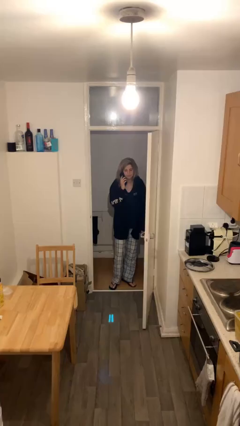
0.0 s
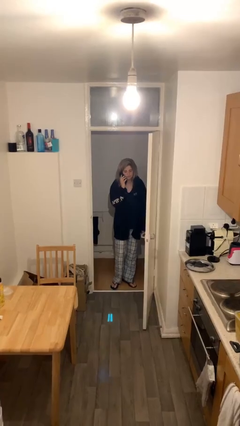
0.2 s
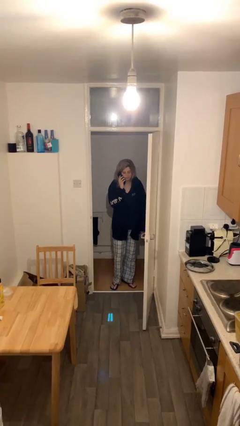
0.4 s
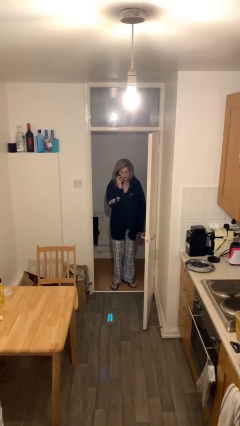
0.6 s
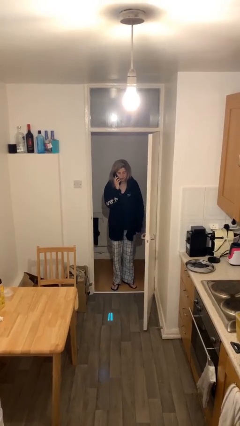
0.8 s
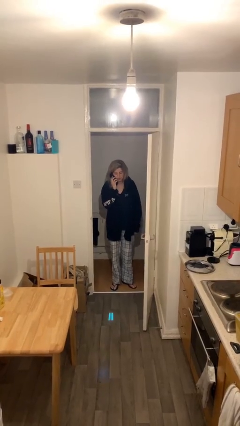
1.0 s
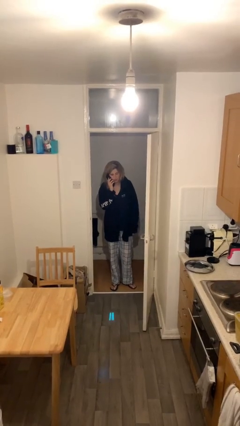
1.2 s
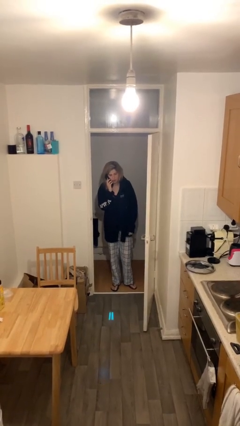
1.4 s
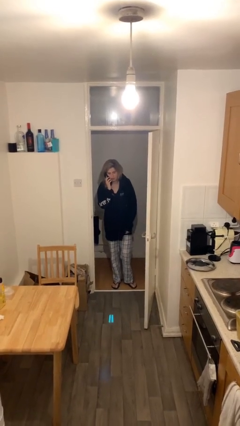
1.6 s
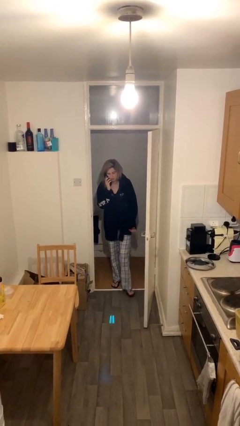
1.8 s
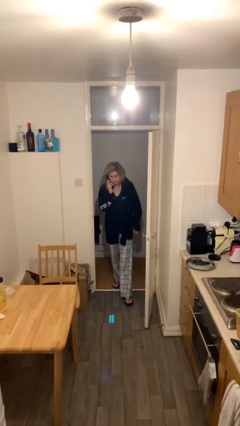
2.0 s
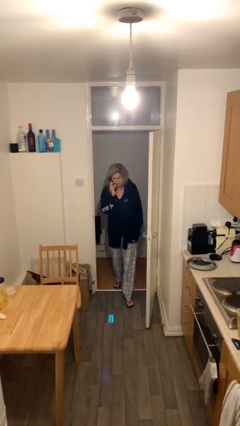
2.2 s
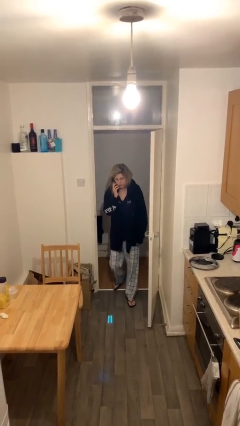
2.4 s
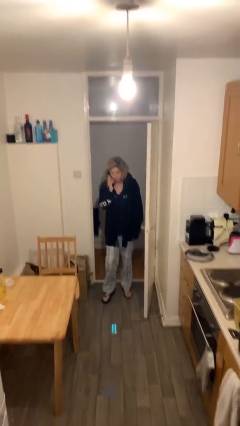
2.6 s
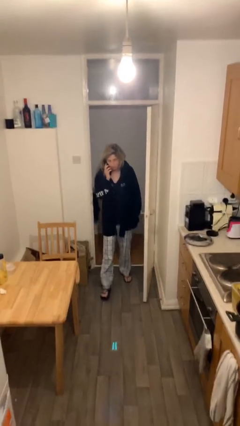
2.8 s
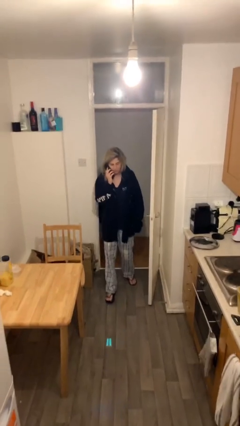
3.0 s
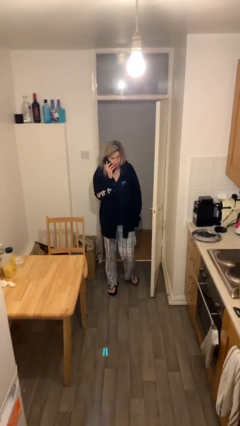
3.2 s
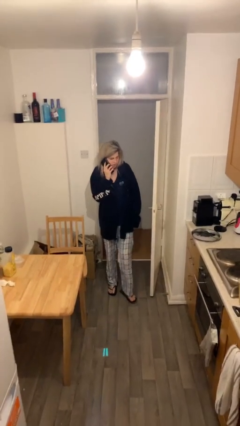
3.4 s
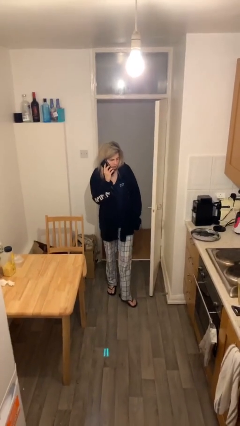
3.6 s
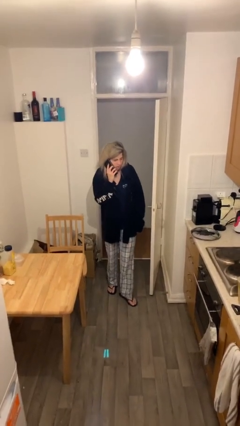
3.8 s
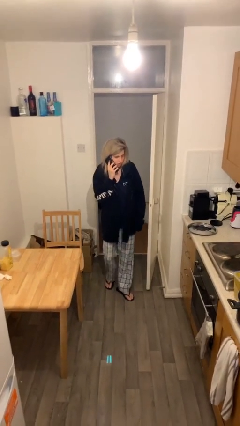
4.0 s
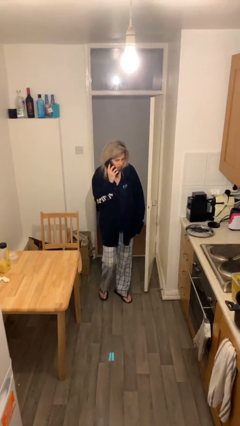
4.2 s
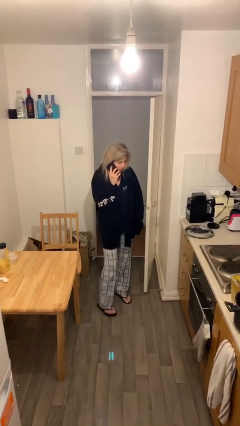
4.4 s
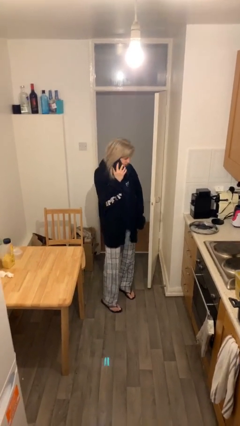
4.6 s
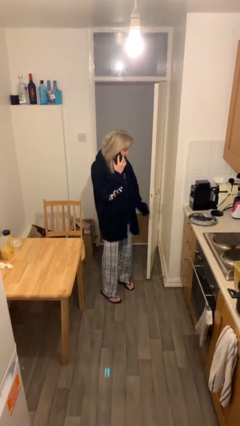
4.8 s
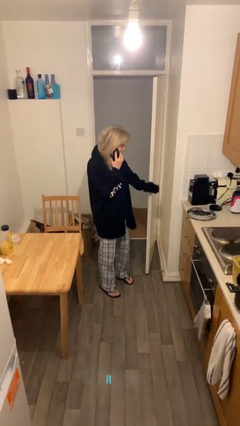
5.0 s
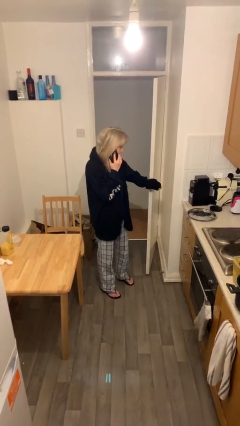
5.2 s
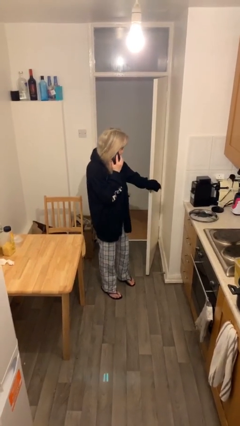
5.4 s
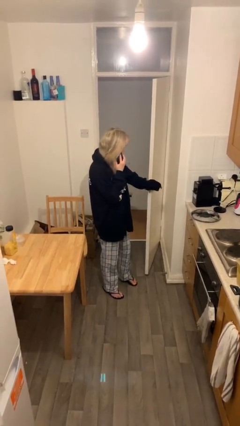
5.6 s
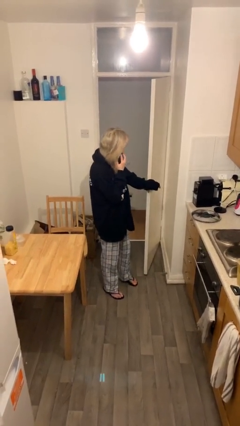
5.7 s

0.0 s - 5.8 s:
person enters scene through structure

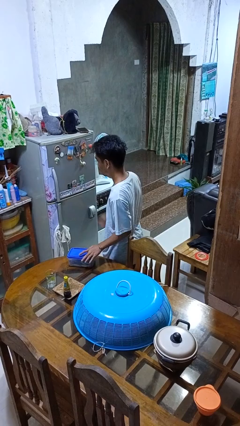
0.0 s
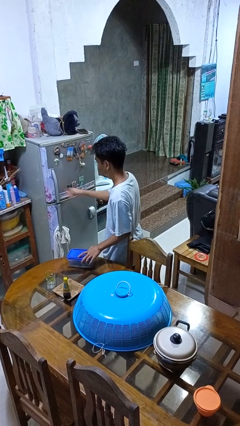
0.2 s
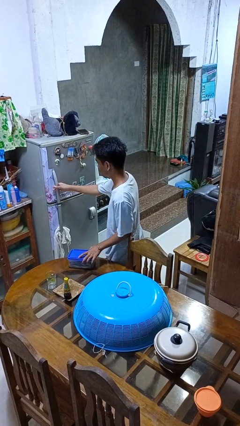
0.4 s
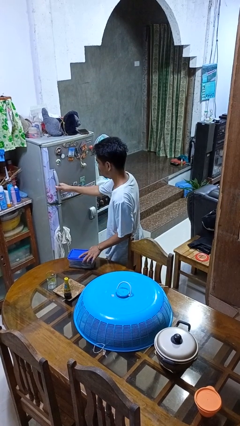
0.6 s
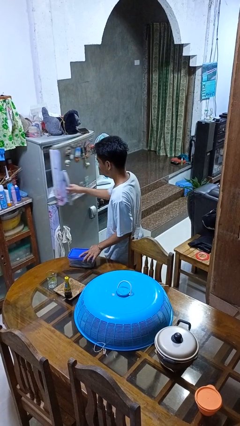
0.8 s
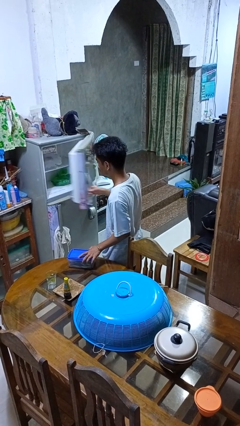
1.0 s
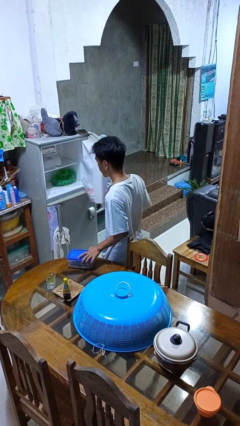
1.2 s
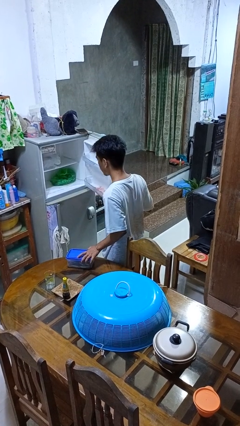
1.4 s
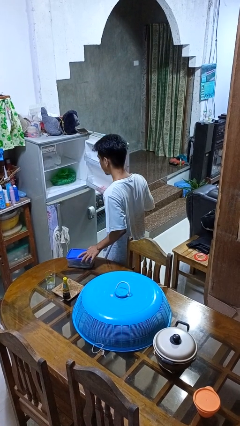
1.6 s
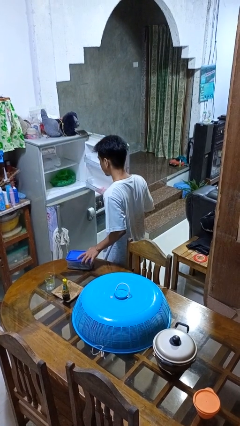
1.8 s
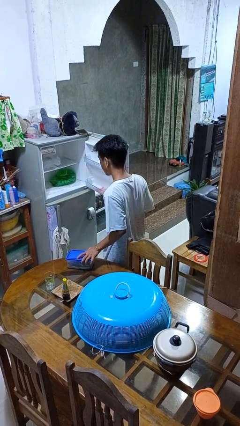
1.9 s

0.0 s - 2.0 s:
person opens refrigerator

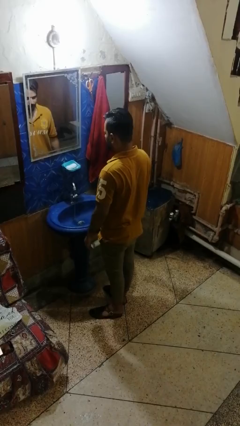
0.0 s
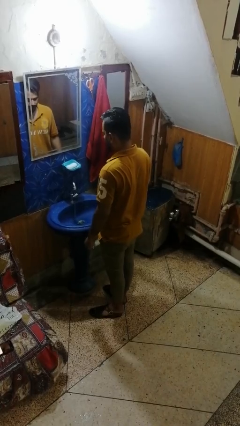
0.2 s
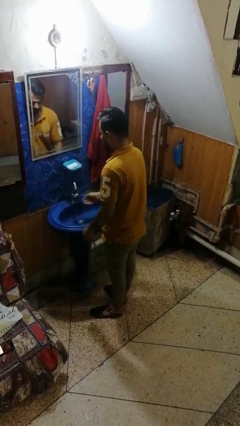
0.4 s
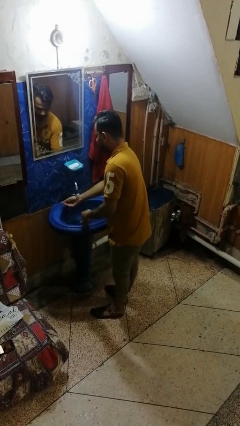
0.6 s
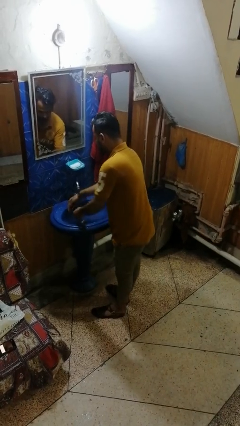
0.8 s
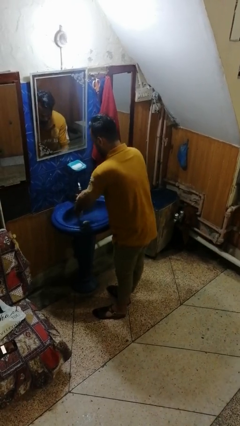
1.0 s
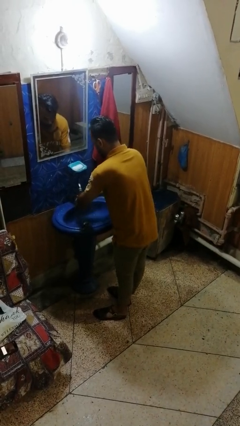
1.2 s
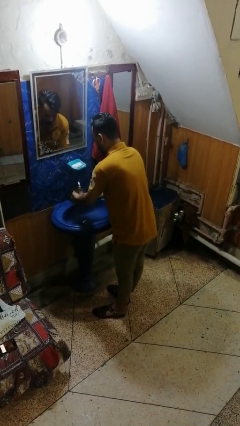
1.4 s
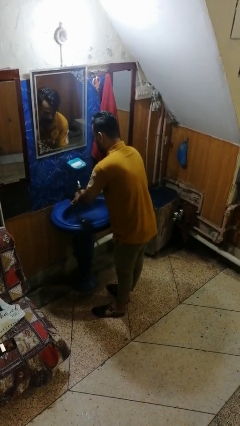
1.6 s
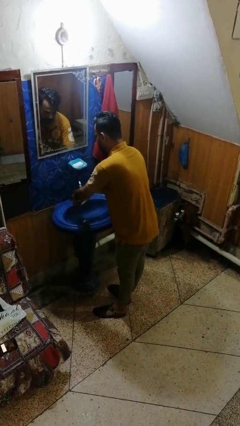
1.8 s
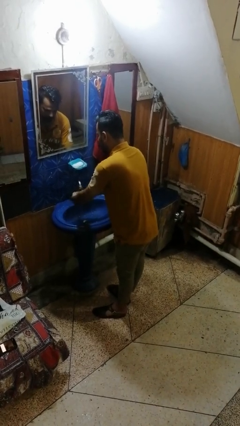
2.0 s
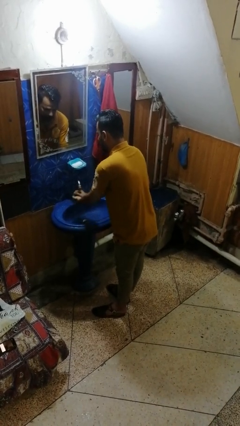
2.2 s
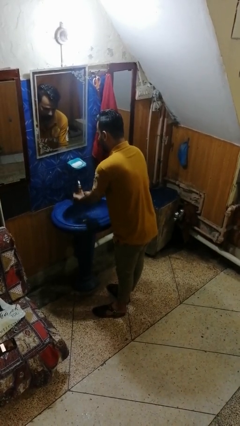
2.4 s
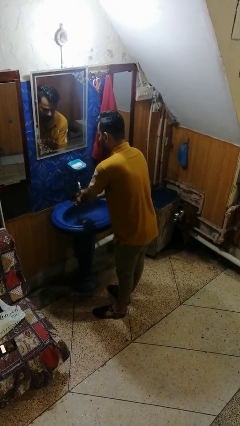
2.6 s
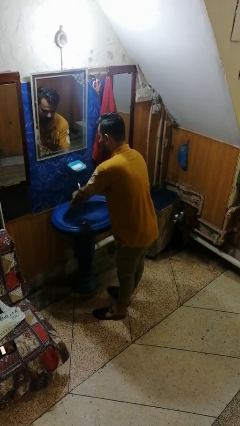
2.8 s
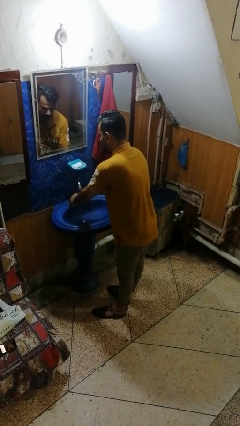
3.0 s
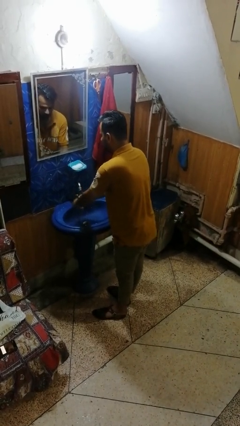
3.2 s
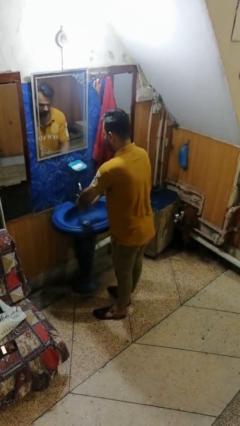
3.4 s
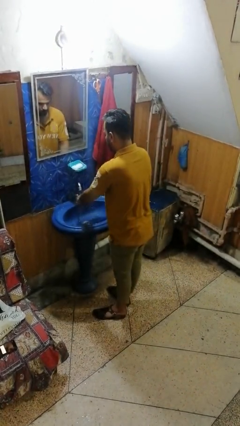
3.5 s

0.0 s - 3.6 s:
person washes hands

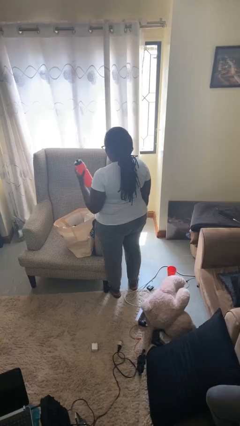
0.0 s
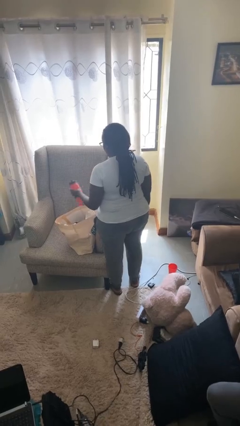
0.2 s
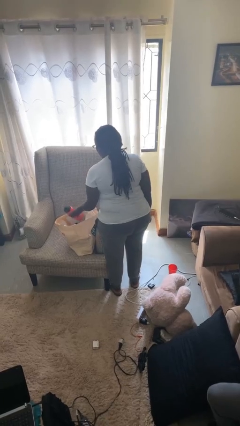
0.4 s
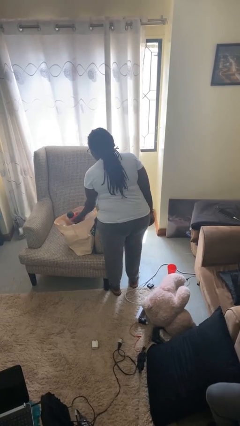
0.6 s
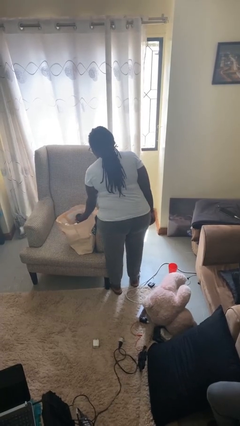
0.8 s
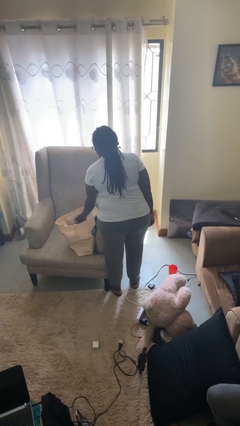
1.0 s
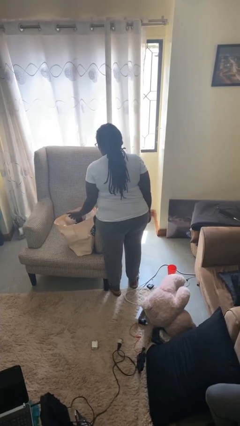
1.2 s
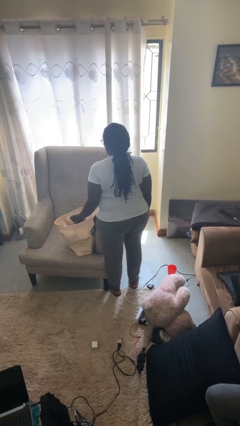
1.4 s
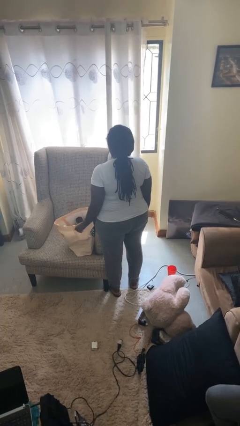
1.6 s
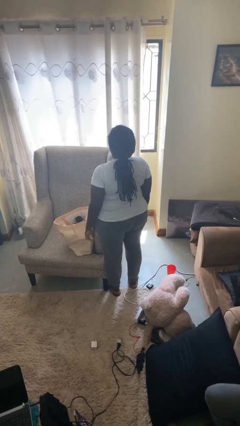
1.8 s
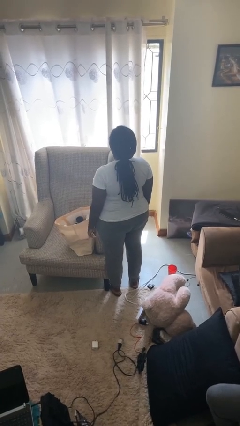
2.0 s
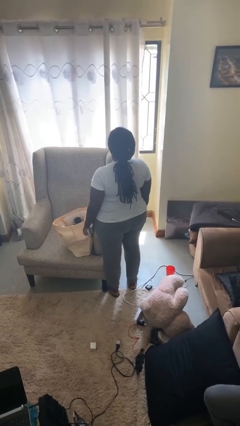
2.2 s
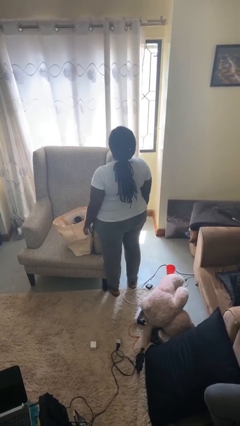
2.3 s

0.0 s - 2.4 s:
person puts object into bag

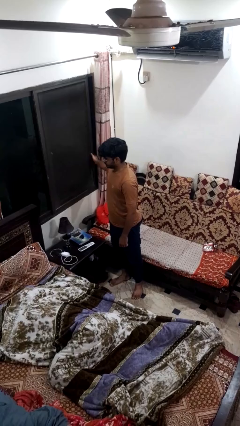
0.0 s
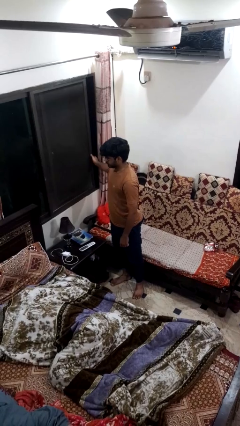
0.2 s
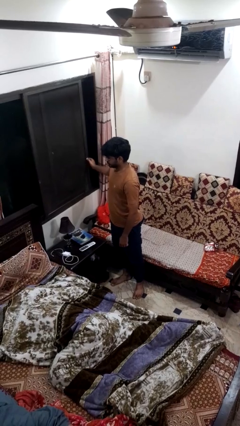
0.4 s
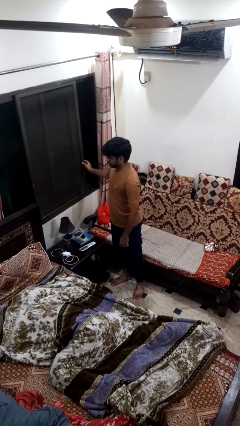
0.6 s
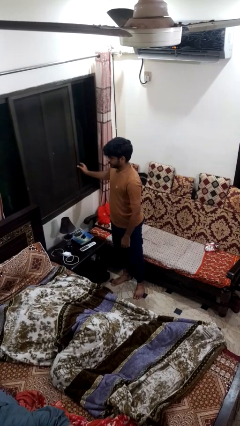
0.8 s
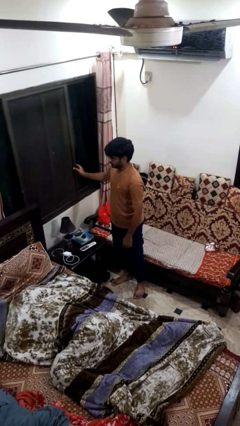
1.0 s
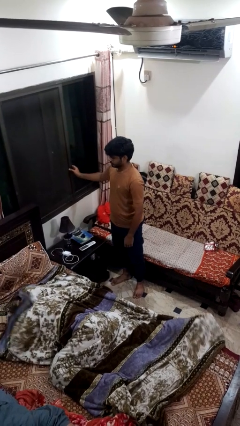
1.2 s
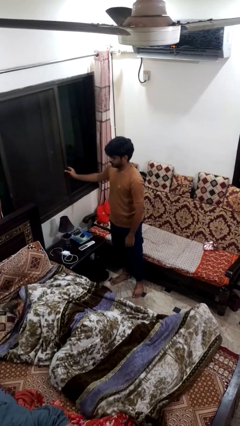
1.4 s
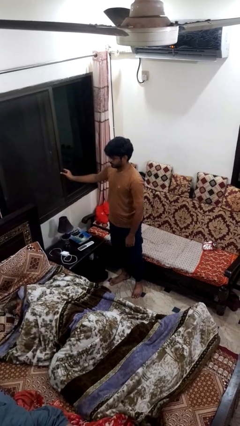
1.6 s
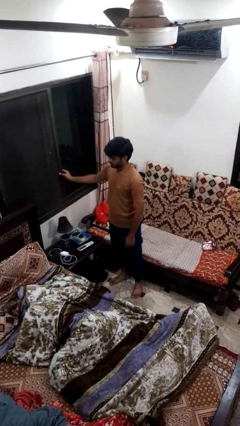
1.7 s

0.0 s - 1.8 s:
person closes home window

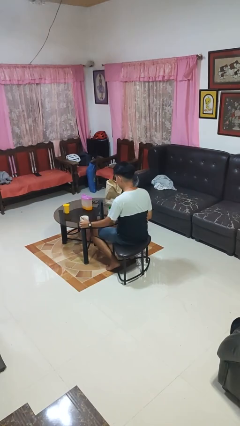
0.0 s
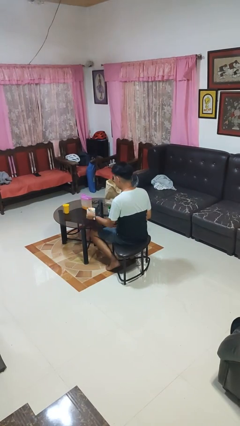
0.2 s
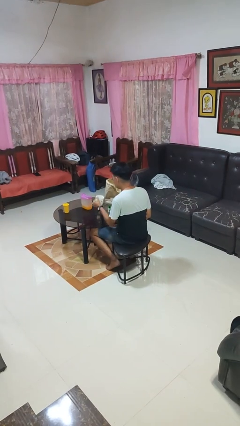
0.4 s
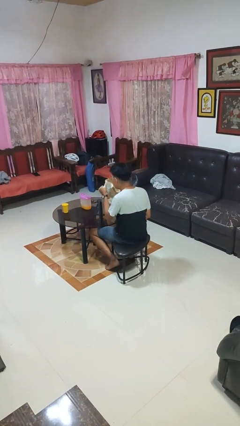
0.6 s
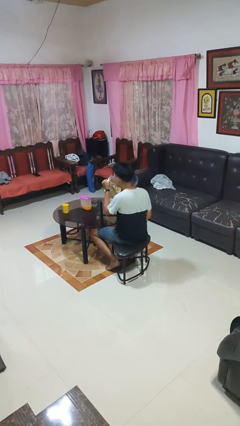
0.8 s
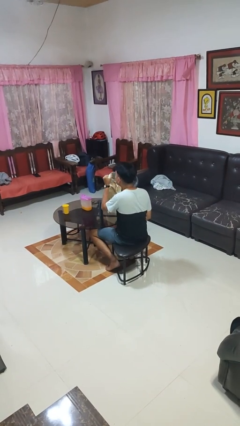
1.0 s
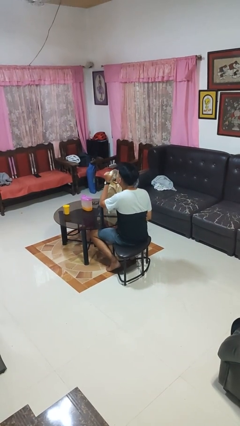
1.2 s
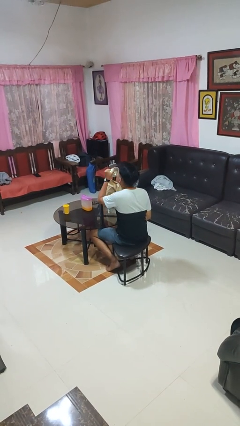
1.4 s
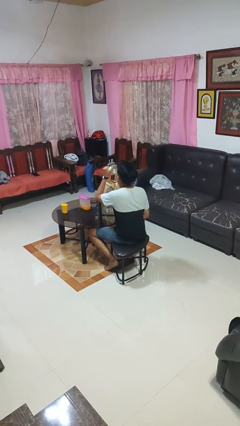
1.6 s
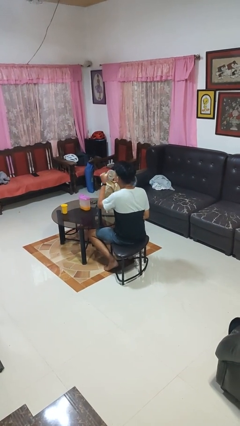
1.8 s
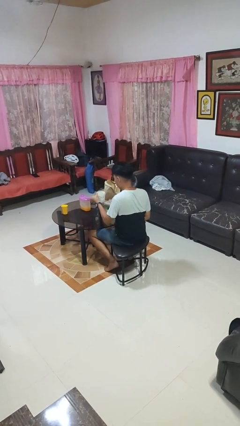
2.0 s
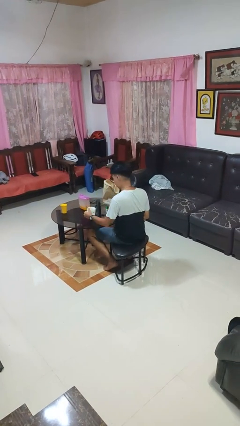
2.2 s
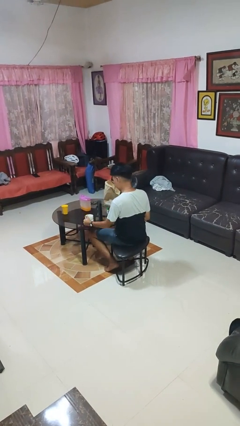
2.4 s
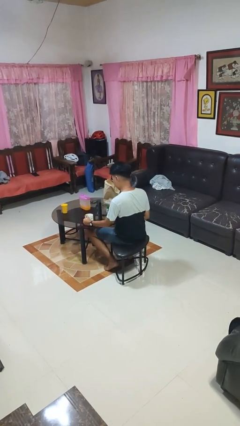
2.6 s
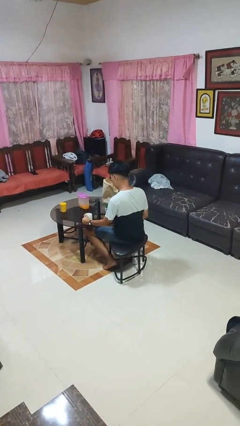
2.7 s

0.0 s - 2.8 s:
person drinks from mug
